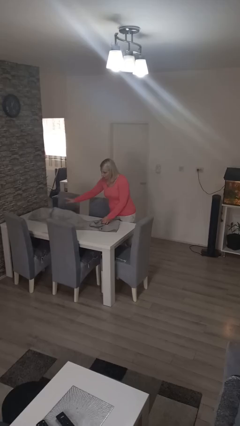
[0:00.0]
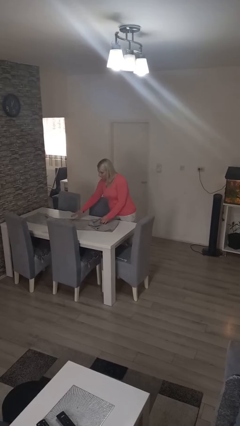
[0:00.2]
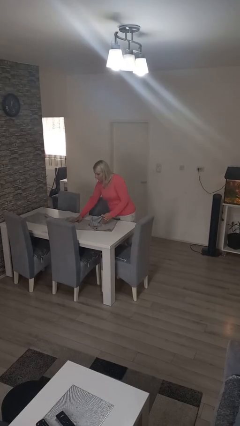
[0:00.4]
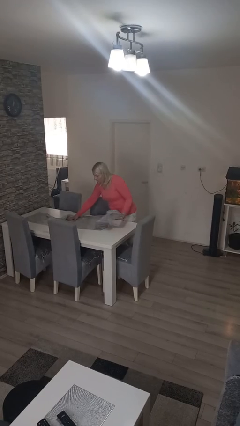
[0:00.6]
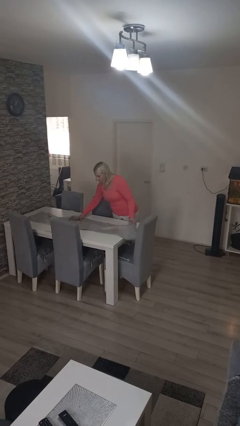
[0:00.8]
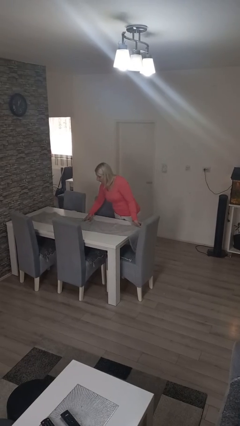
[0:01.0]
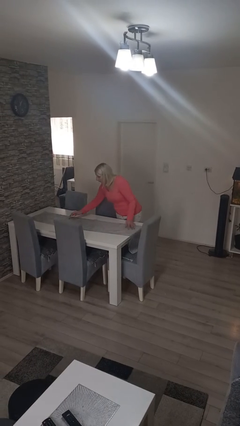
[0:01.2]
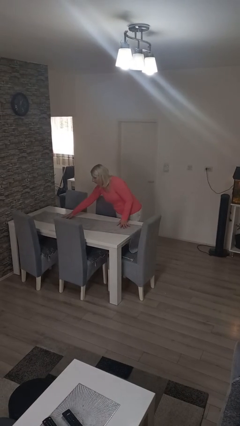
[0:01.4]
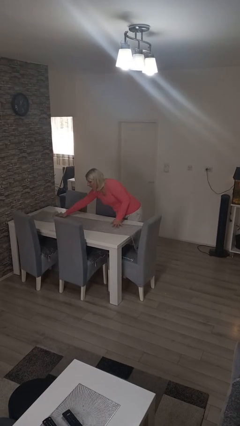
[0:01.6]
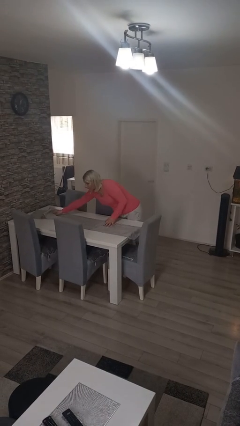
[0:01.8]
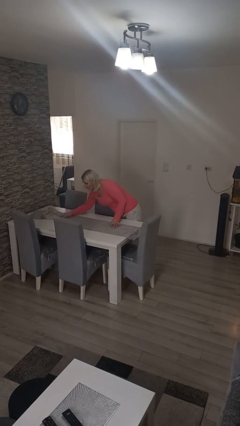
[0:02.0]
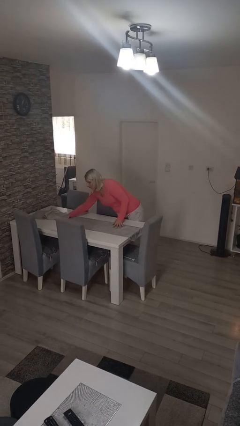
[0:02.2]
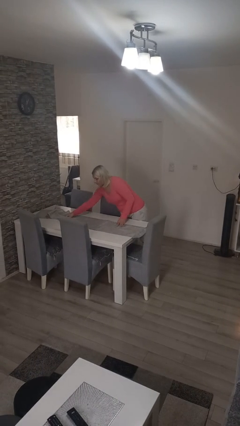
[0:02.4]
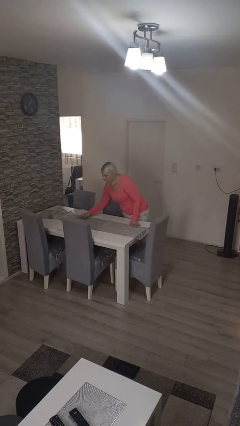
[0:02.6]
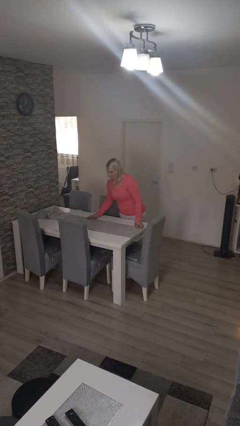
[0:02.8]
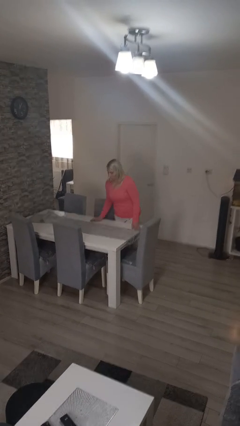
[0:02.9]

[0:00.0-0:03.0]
person spreads tablecloth

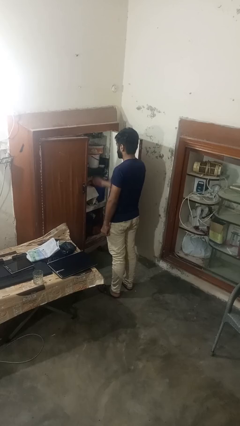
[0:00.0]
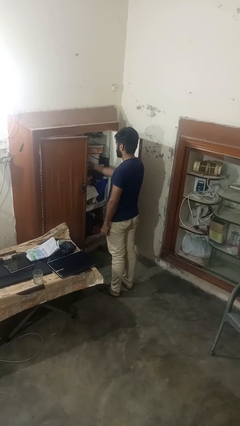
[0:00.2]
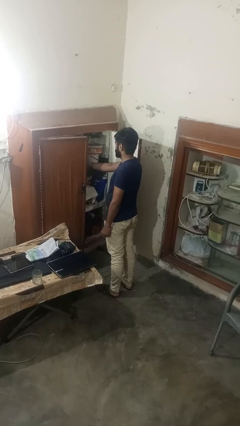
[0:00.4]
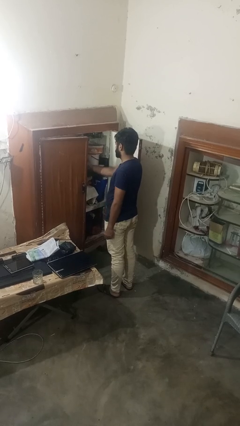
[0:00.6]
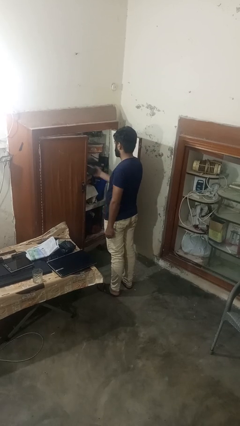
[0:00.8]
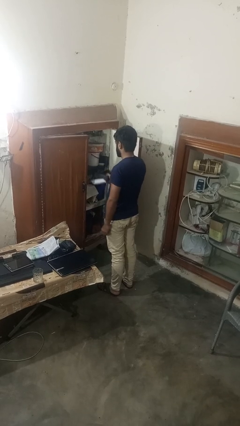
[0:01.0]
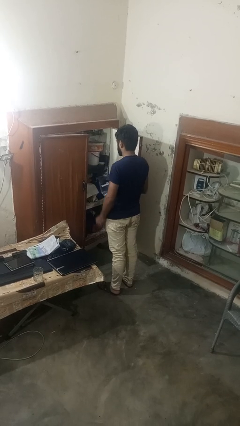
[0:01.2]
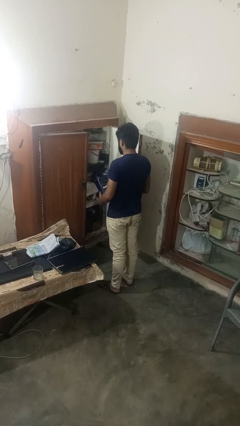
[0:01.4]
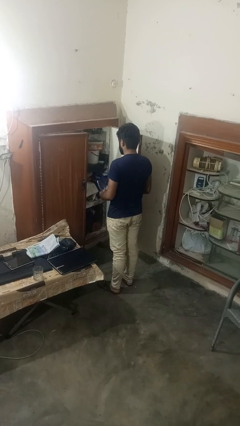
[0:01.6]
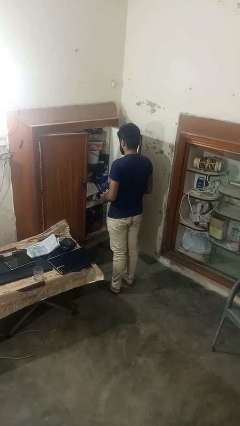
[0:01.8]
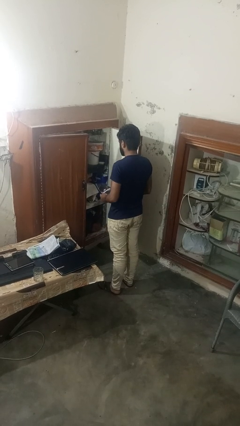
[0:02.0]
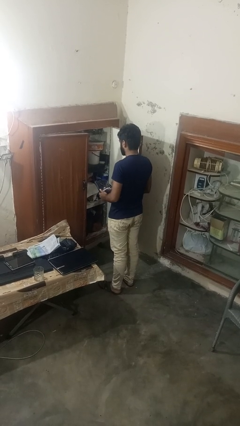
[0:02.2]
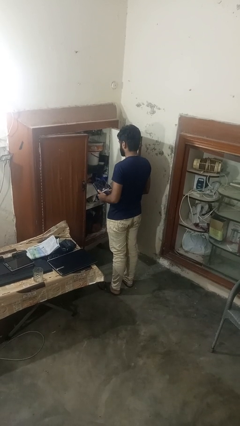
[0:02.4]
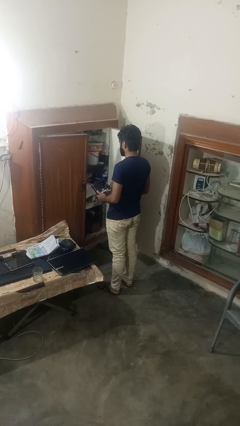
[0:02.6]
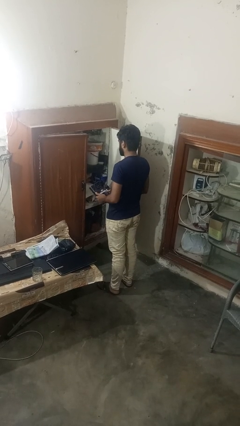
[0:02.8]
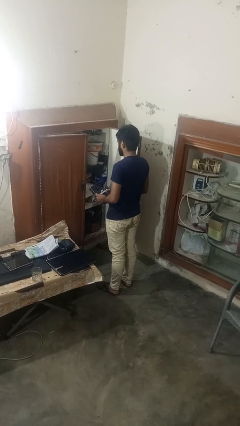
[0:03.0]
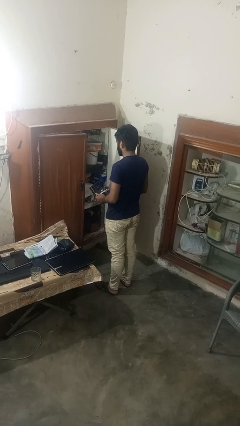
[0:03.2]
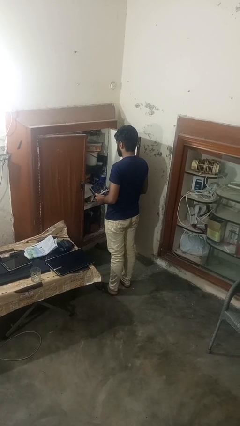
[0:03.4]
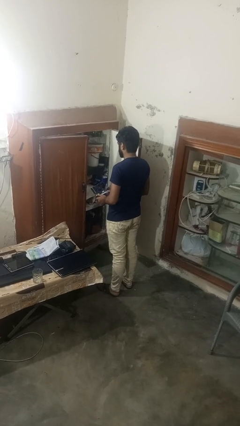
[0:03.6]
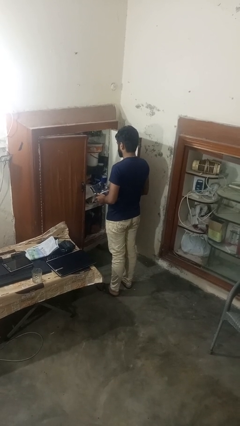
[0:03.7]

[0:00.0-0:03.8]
person picks up object from cabinet

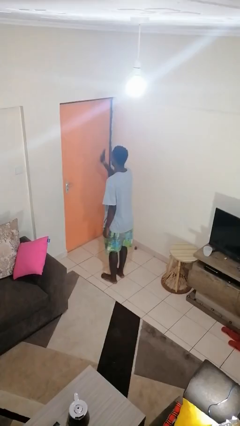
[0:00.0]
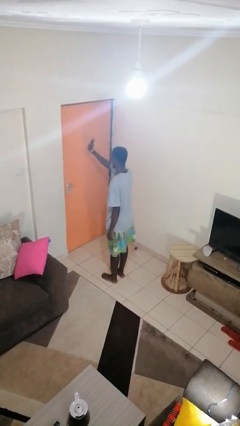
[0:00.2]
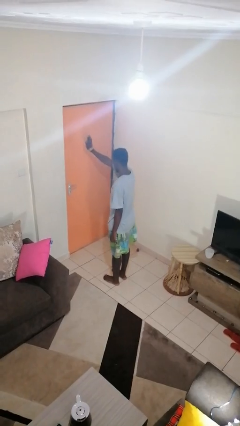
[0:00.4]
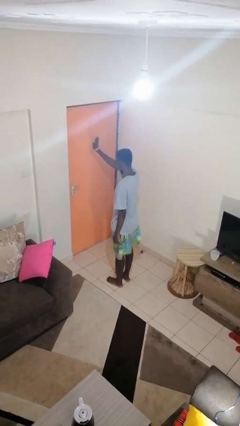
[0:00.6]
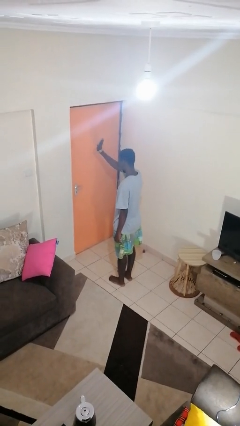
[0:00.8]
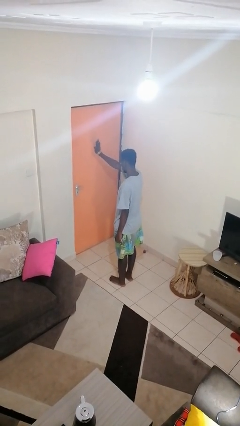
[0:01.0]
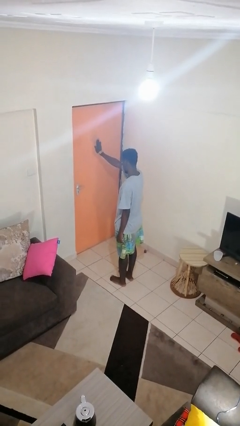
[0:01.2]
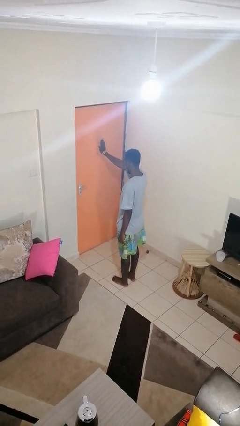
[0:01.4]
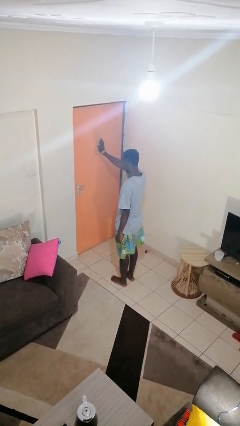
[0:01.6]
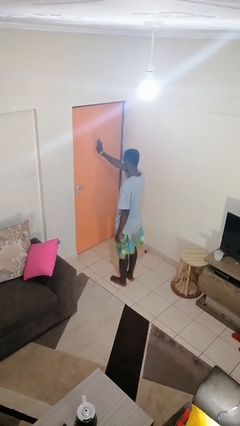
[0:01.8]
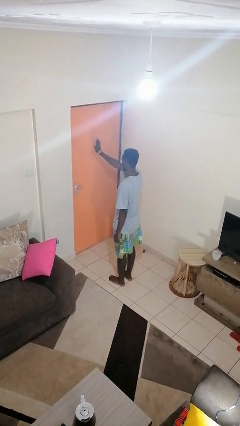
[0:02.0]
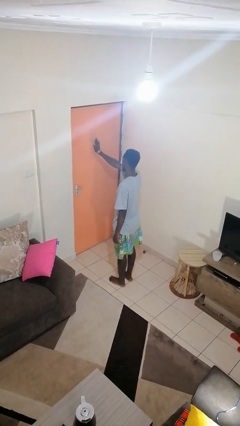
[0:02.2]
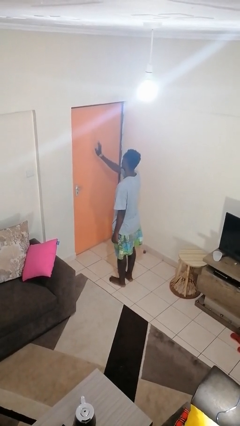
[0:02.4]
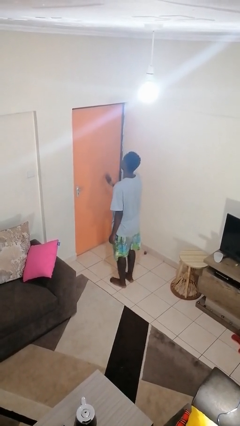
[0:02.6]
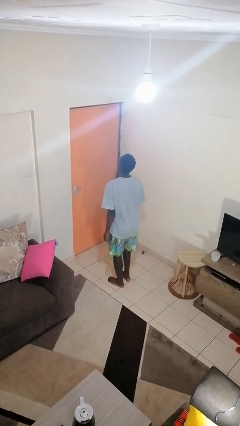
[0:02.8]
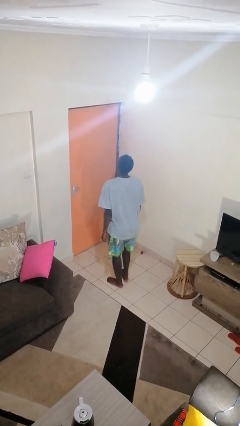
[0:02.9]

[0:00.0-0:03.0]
person gestures stop

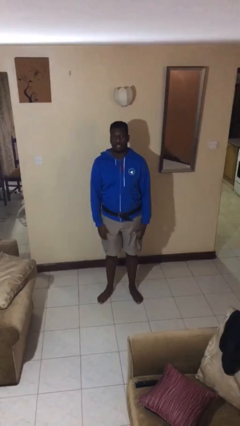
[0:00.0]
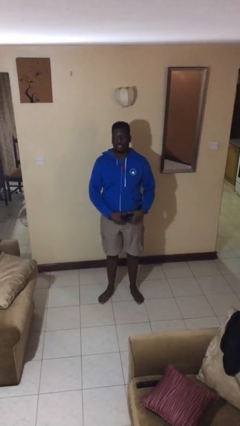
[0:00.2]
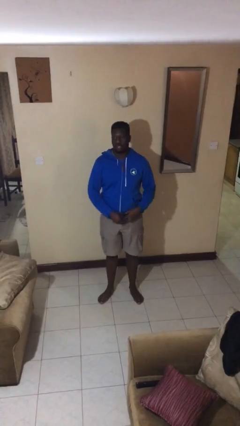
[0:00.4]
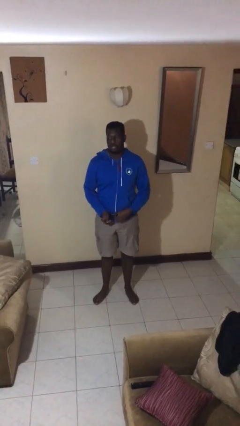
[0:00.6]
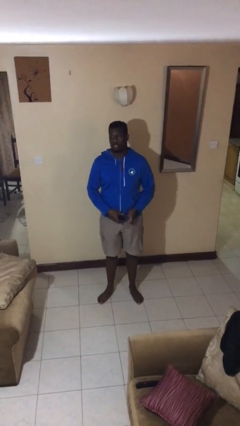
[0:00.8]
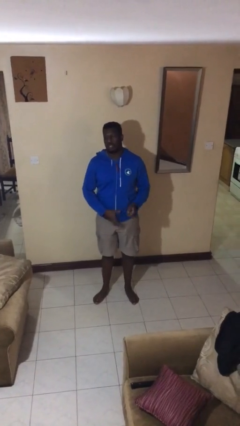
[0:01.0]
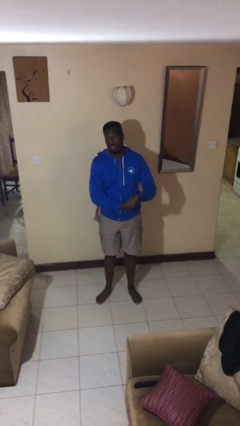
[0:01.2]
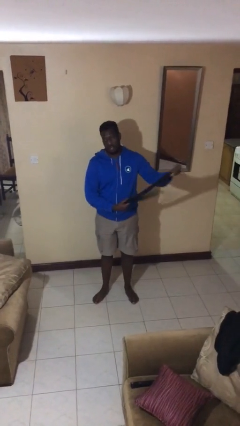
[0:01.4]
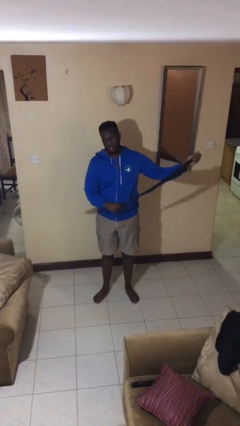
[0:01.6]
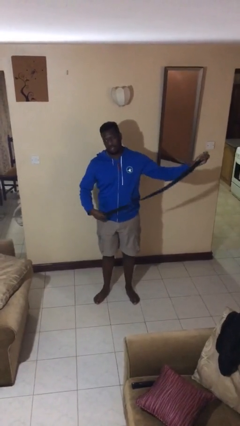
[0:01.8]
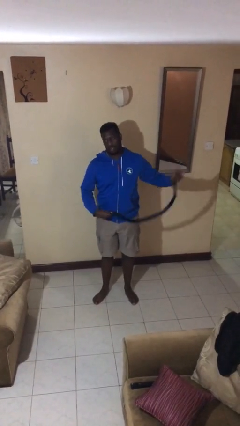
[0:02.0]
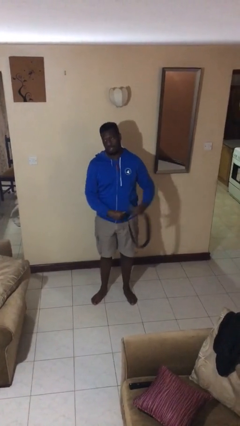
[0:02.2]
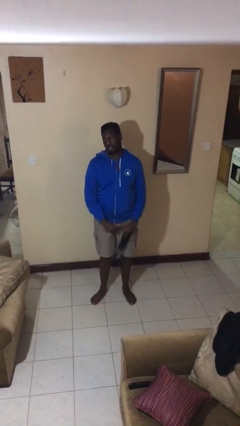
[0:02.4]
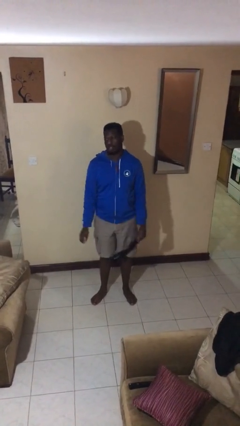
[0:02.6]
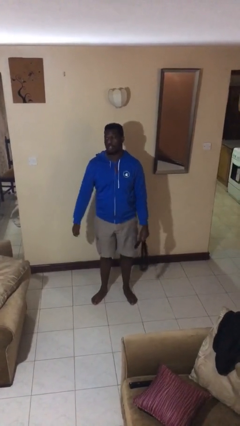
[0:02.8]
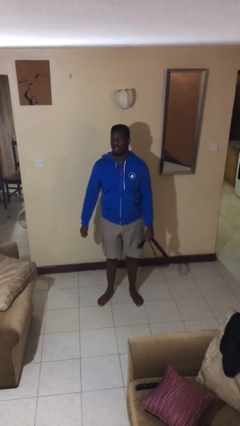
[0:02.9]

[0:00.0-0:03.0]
person takes off belt

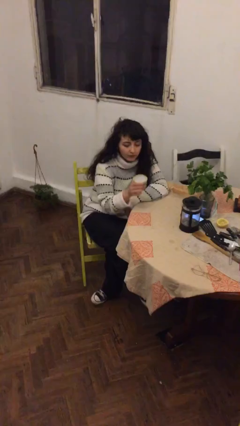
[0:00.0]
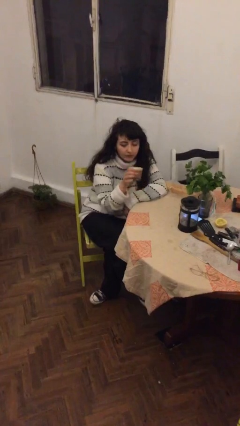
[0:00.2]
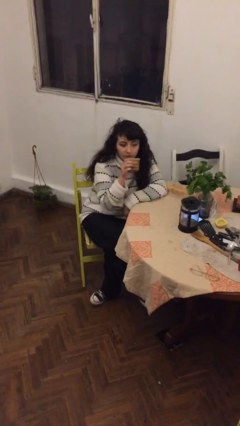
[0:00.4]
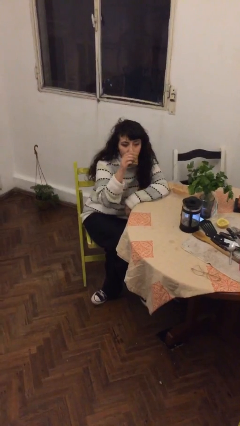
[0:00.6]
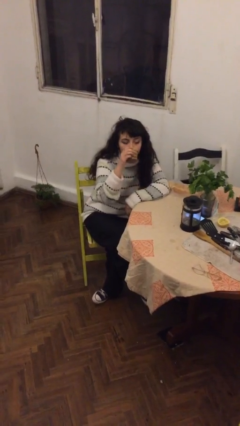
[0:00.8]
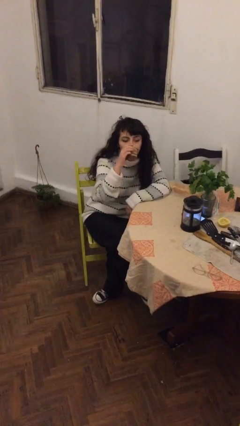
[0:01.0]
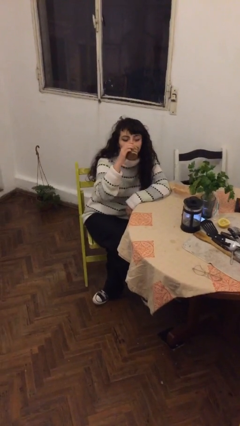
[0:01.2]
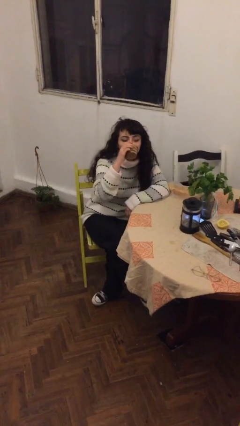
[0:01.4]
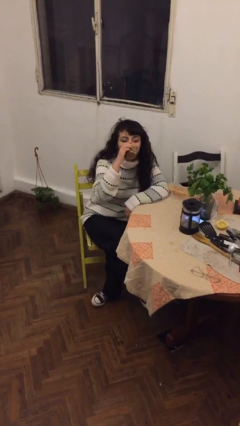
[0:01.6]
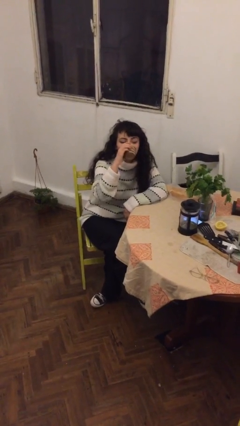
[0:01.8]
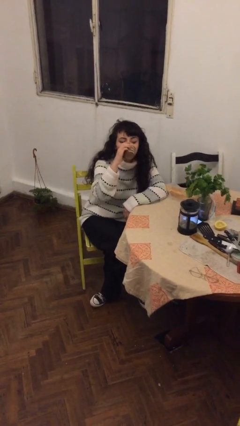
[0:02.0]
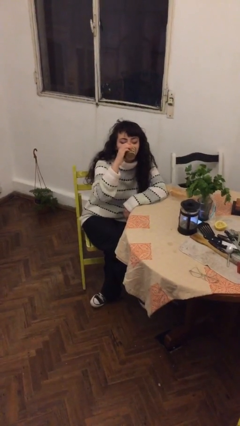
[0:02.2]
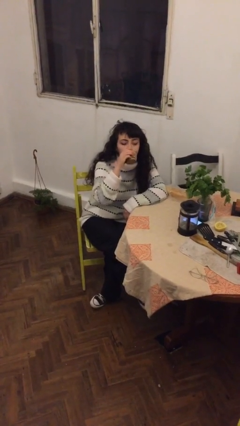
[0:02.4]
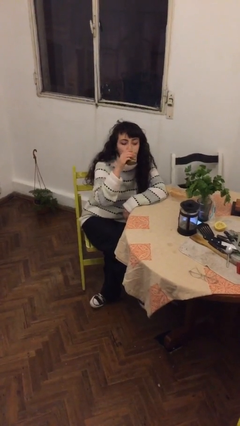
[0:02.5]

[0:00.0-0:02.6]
person drinks from mug

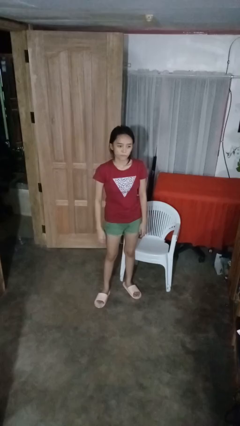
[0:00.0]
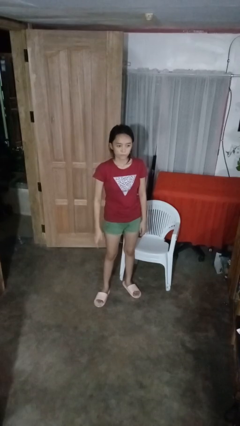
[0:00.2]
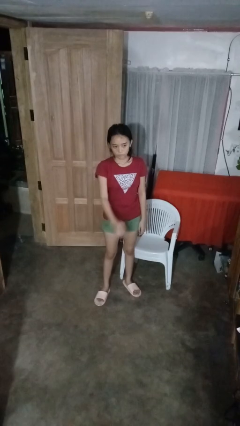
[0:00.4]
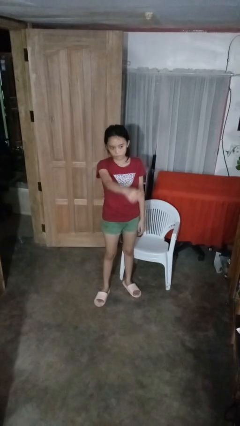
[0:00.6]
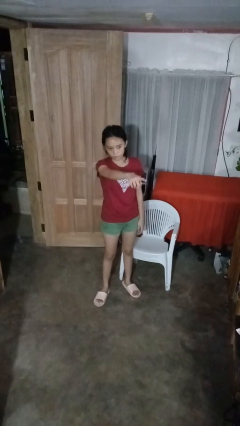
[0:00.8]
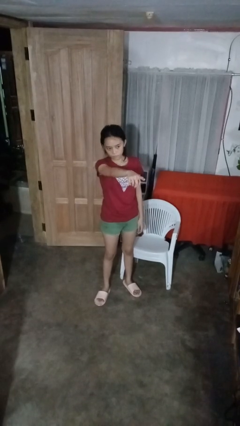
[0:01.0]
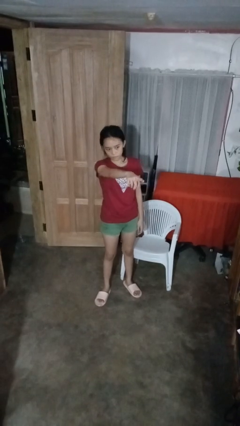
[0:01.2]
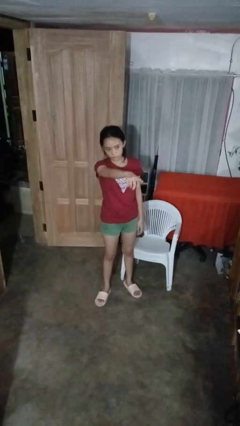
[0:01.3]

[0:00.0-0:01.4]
person points at person

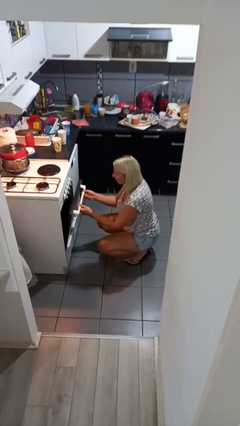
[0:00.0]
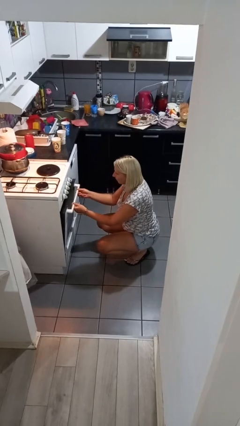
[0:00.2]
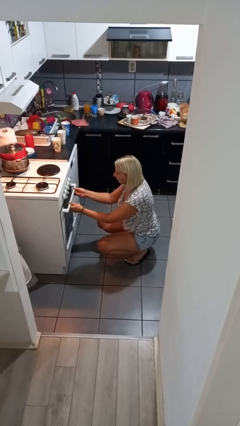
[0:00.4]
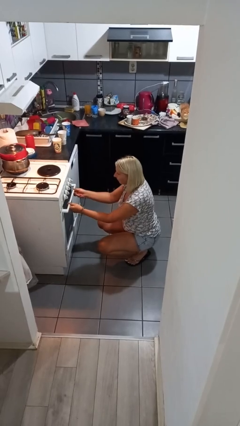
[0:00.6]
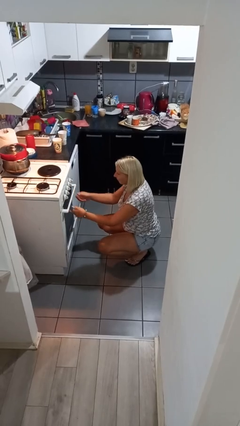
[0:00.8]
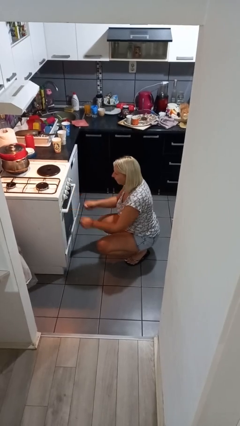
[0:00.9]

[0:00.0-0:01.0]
person closes oven door
